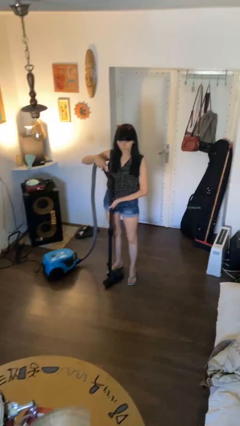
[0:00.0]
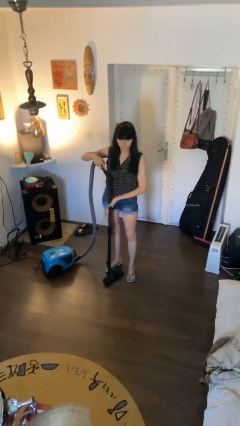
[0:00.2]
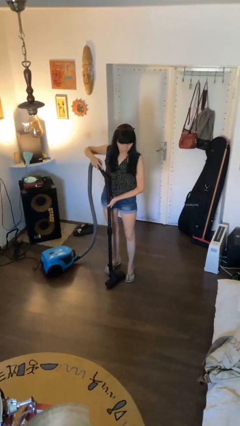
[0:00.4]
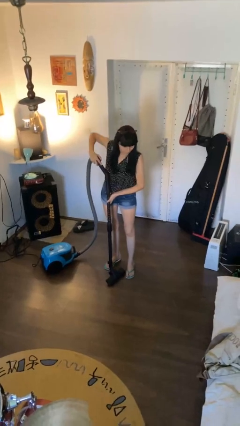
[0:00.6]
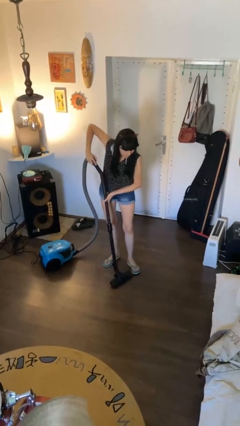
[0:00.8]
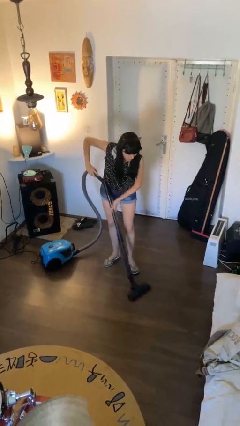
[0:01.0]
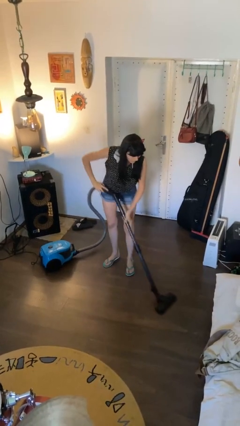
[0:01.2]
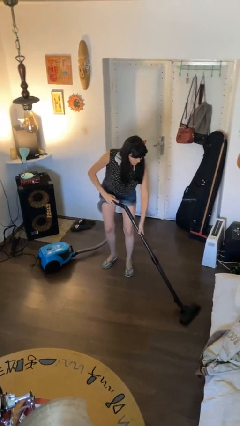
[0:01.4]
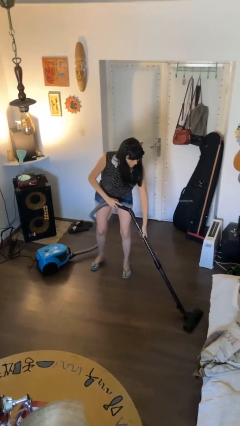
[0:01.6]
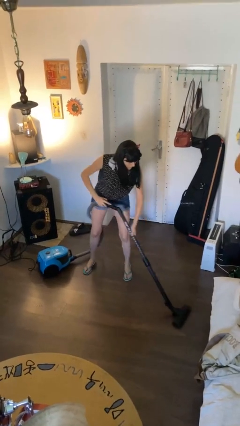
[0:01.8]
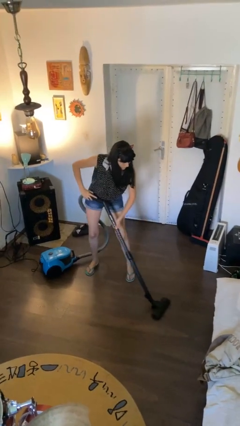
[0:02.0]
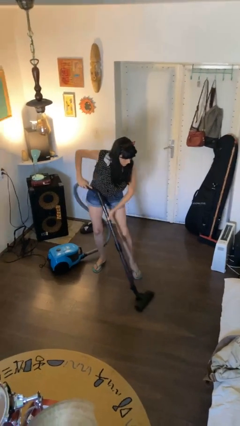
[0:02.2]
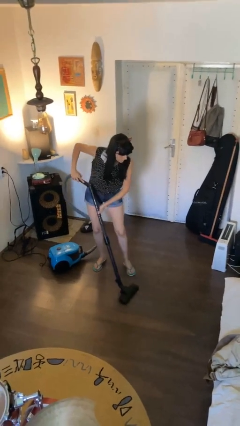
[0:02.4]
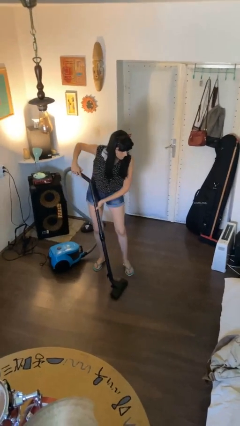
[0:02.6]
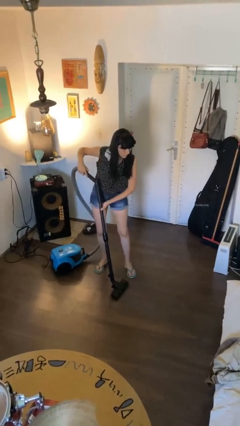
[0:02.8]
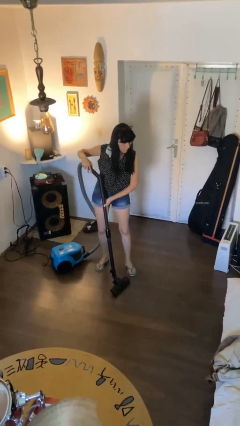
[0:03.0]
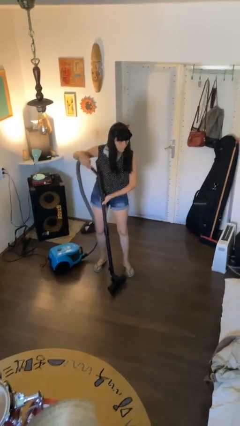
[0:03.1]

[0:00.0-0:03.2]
person vacuums carpet

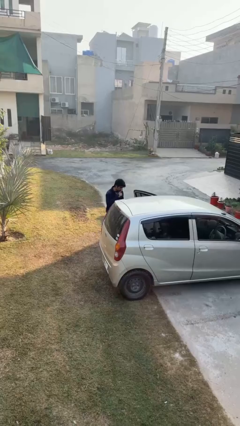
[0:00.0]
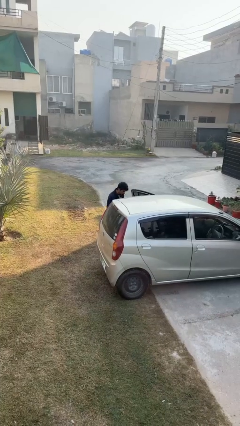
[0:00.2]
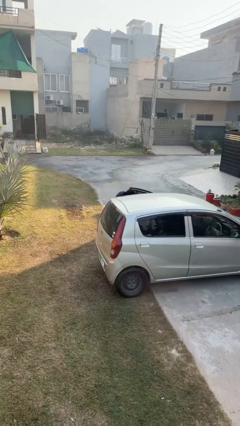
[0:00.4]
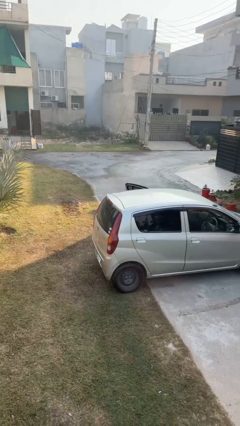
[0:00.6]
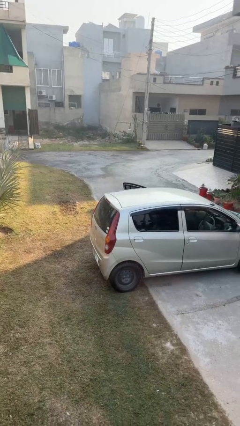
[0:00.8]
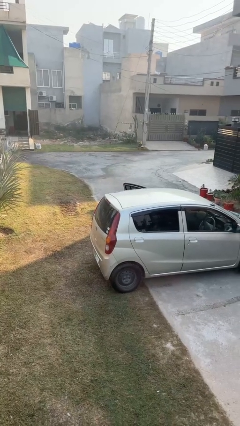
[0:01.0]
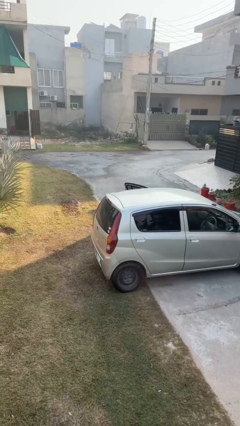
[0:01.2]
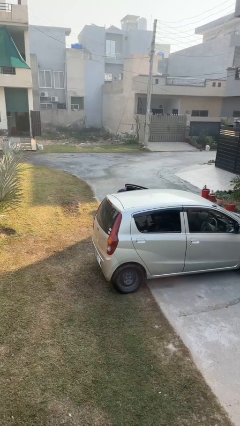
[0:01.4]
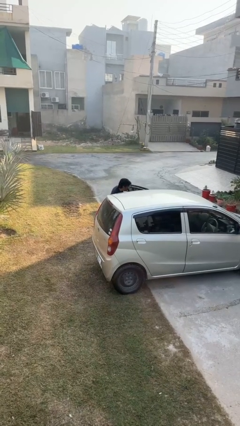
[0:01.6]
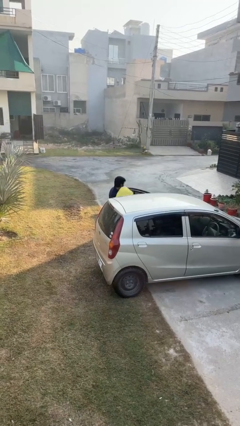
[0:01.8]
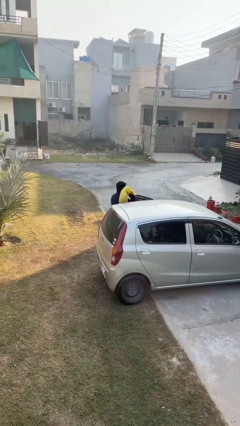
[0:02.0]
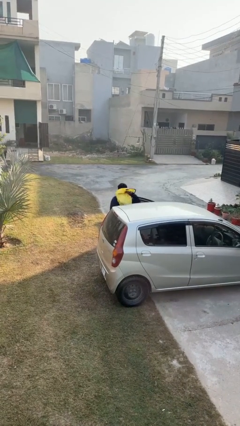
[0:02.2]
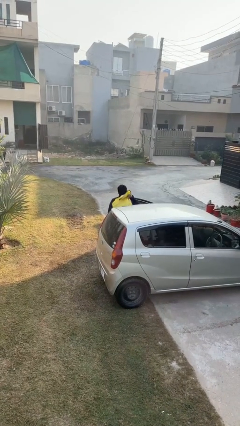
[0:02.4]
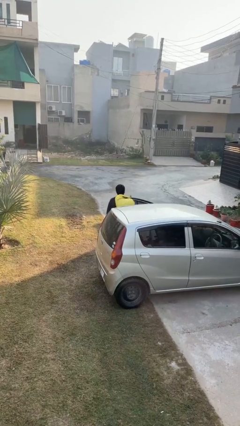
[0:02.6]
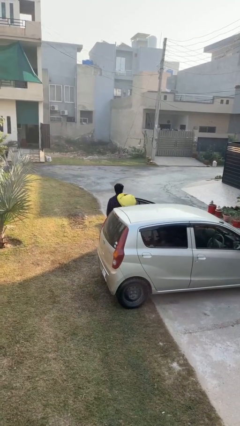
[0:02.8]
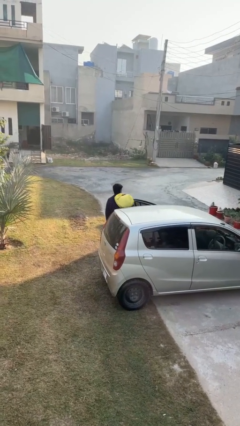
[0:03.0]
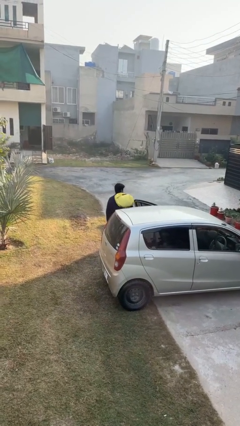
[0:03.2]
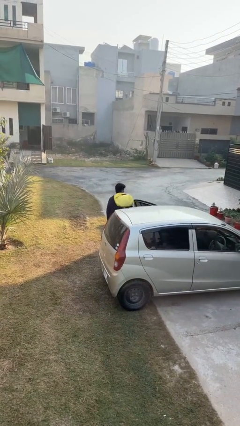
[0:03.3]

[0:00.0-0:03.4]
person unloads car

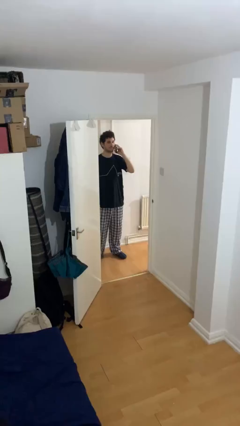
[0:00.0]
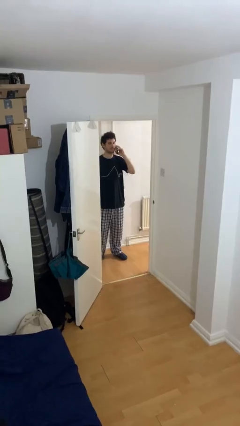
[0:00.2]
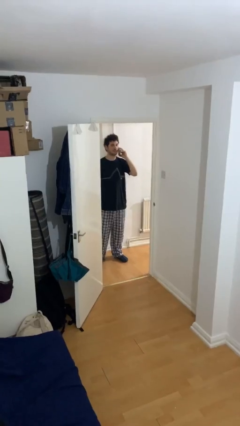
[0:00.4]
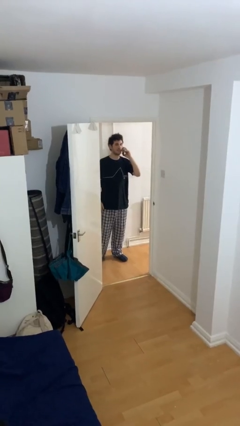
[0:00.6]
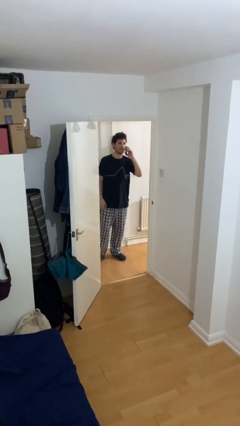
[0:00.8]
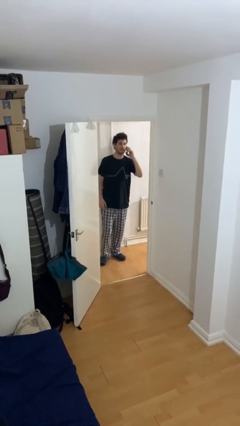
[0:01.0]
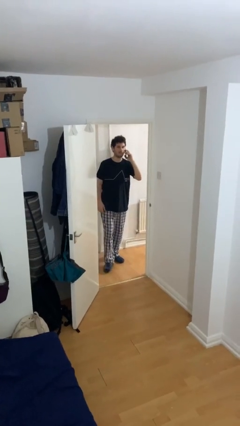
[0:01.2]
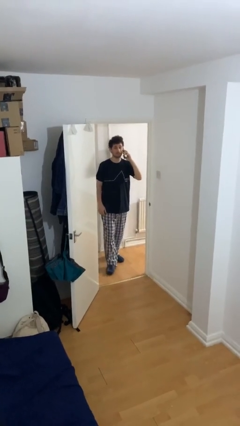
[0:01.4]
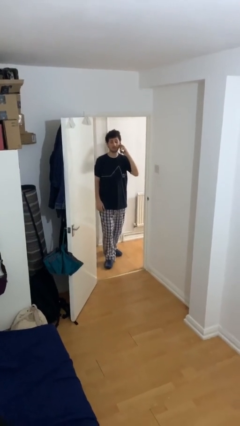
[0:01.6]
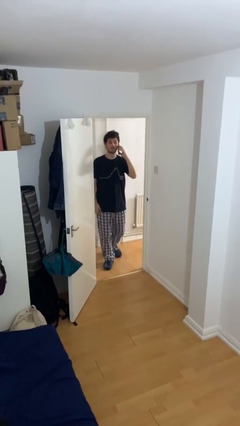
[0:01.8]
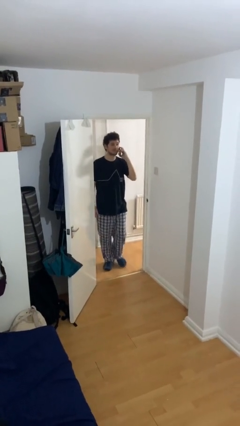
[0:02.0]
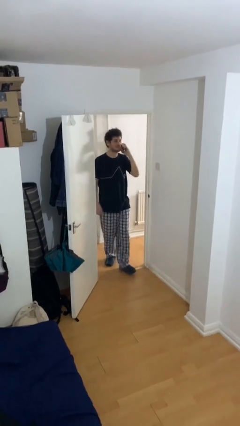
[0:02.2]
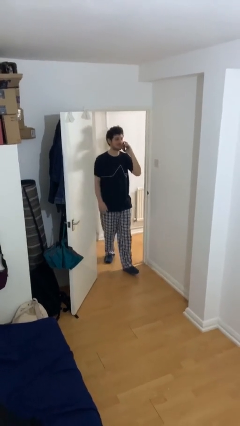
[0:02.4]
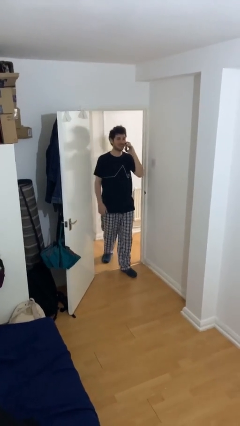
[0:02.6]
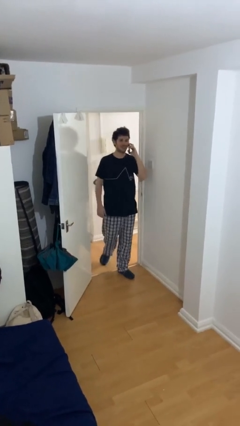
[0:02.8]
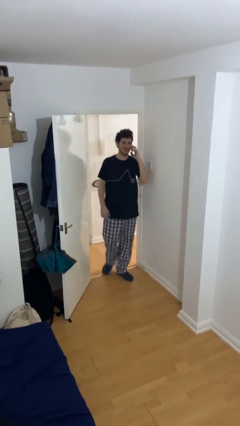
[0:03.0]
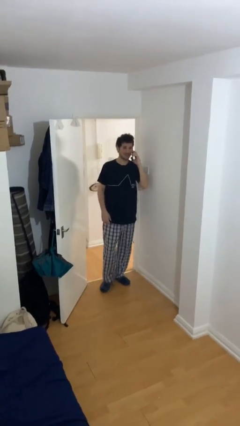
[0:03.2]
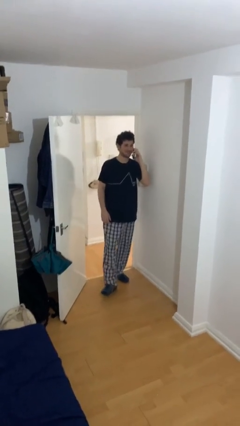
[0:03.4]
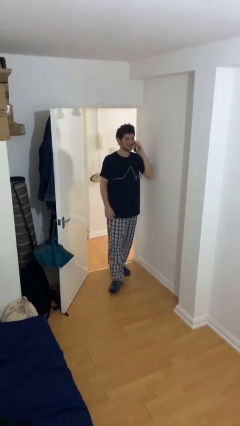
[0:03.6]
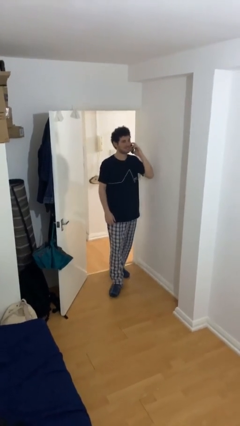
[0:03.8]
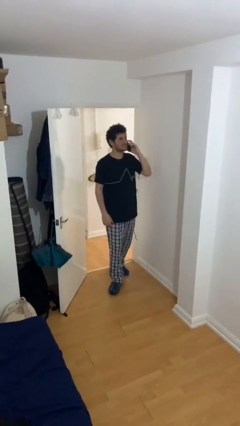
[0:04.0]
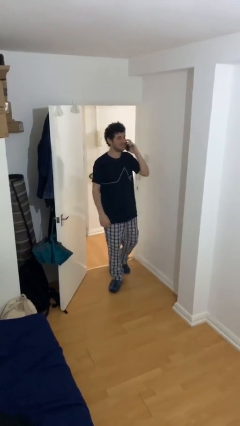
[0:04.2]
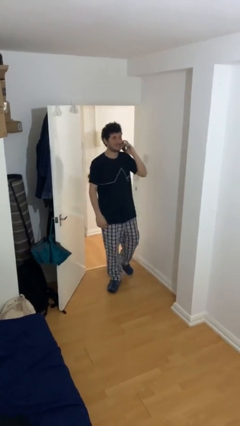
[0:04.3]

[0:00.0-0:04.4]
person enters scene through structure

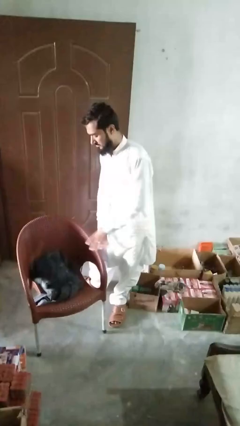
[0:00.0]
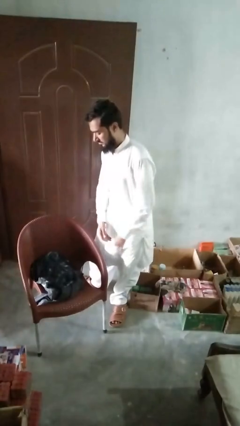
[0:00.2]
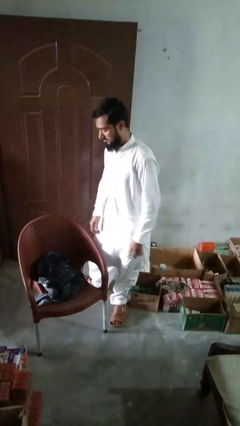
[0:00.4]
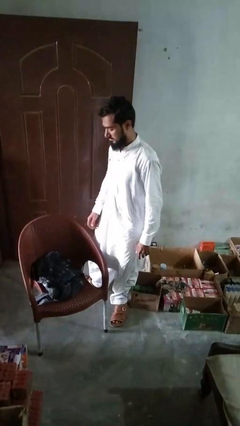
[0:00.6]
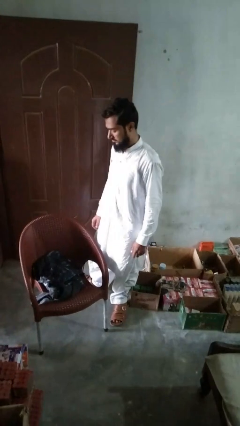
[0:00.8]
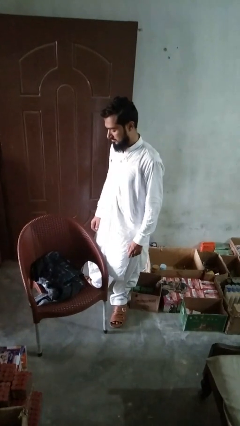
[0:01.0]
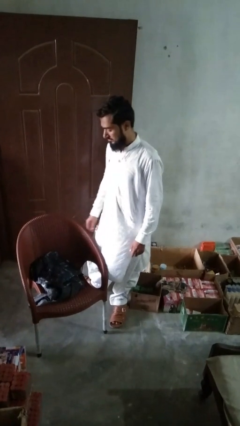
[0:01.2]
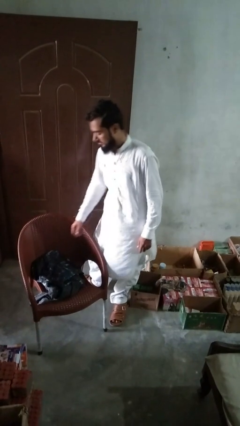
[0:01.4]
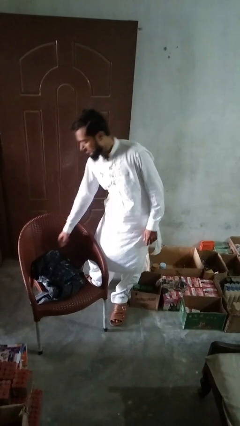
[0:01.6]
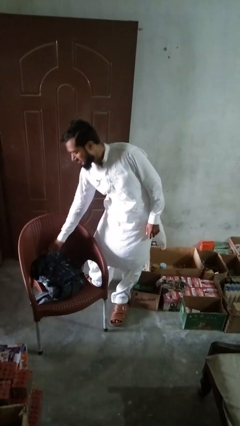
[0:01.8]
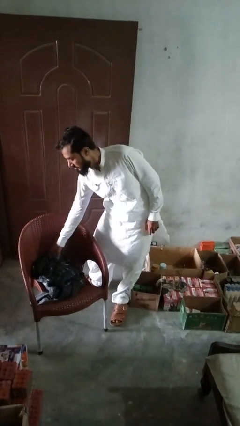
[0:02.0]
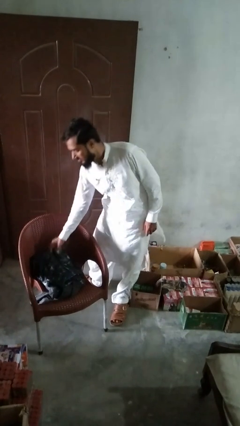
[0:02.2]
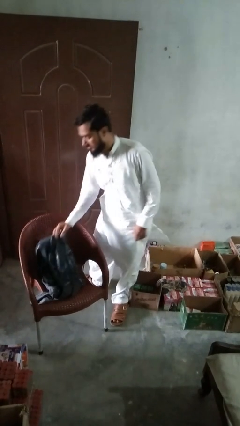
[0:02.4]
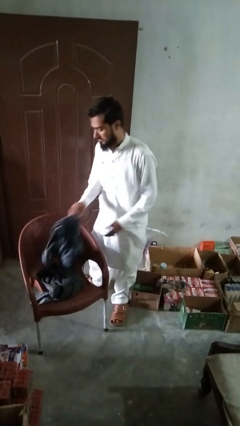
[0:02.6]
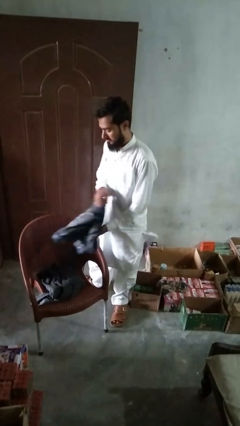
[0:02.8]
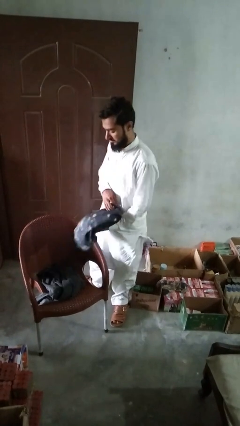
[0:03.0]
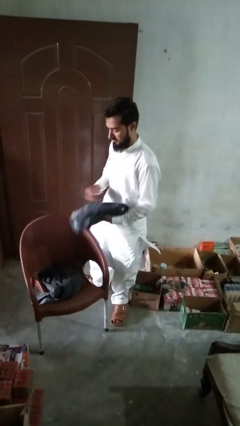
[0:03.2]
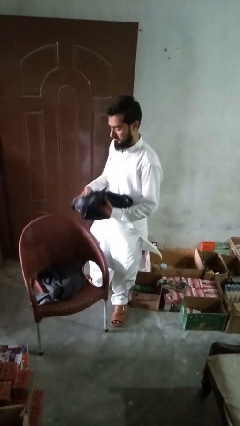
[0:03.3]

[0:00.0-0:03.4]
person folds shirt

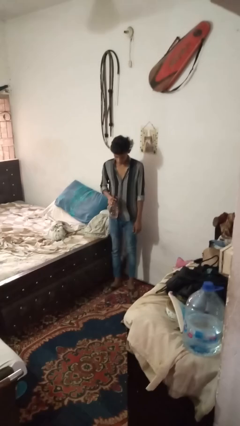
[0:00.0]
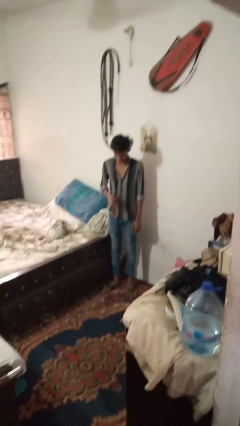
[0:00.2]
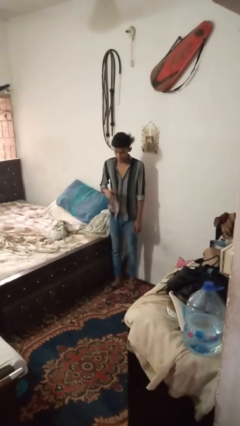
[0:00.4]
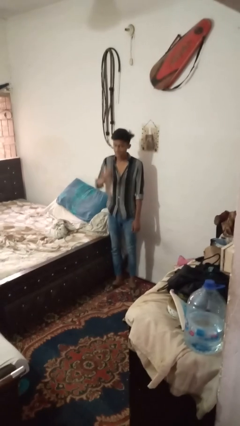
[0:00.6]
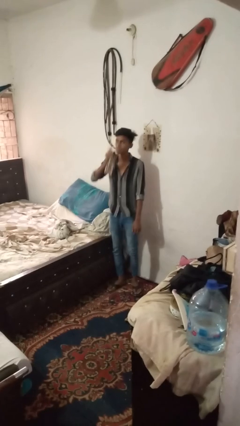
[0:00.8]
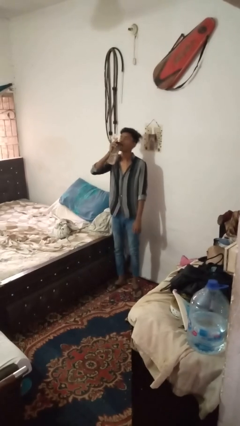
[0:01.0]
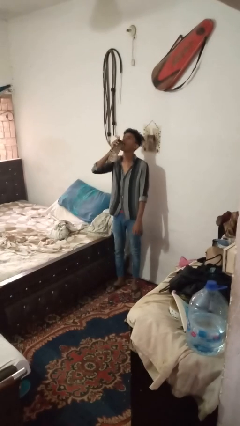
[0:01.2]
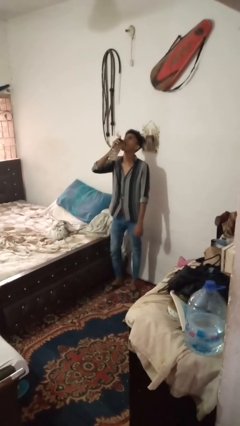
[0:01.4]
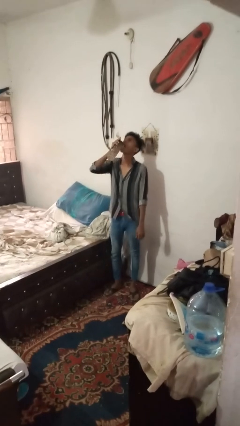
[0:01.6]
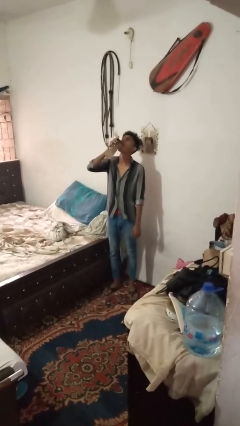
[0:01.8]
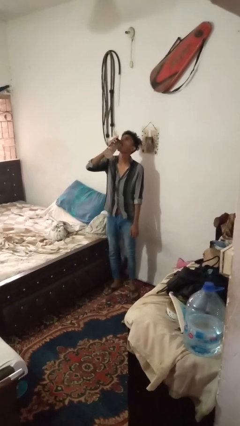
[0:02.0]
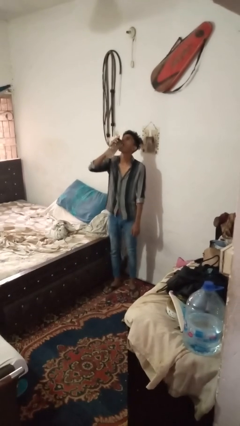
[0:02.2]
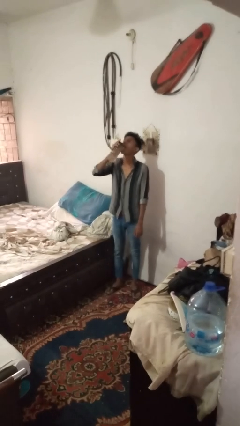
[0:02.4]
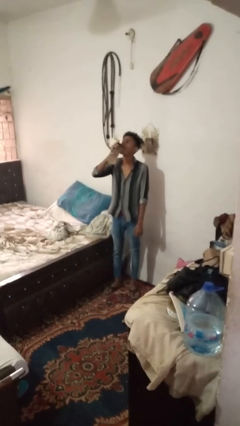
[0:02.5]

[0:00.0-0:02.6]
person drinks from bottle

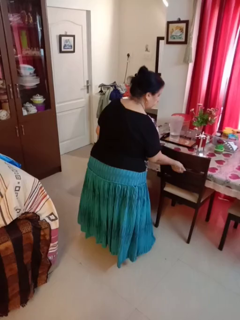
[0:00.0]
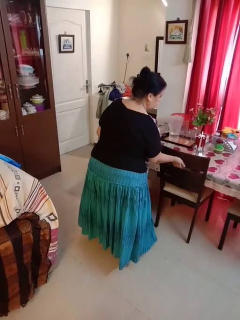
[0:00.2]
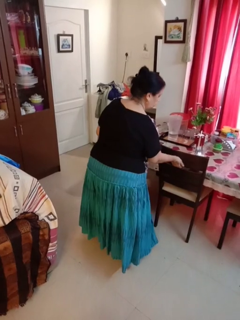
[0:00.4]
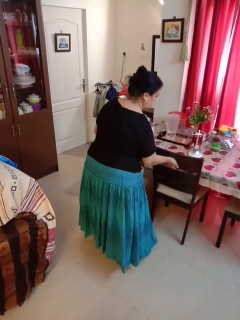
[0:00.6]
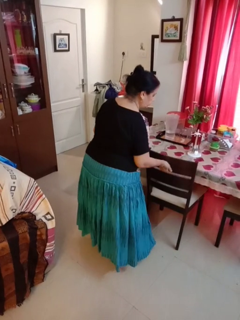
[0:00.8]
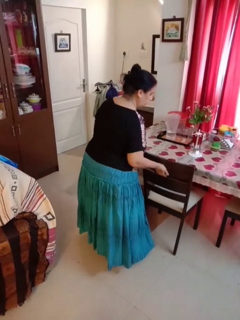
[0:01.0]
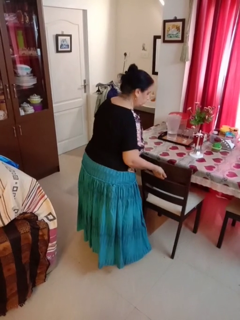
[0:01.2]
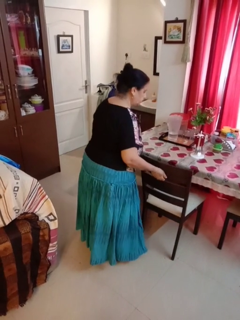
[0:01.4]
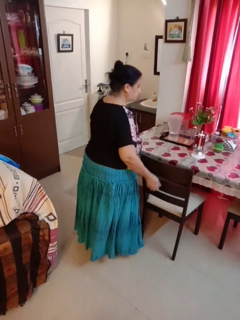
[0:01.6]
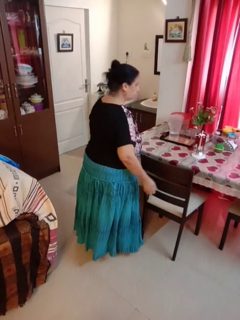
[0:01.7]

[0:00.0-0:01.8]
person pulls out chair
